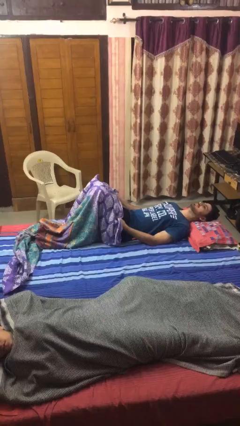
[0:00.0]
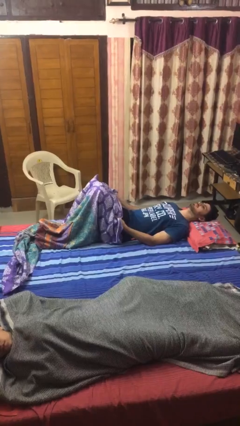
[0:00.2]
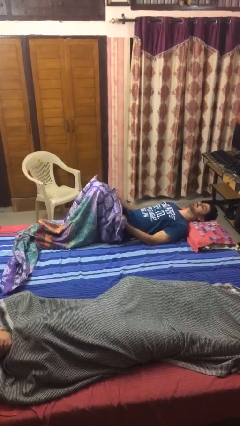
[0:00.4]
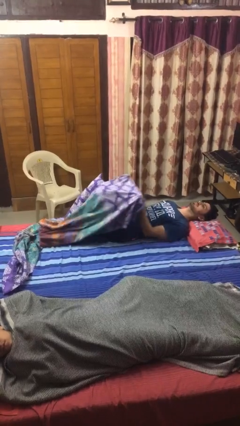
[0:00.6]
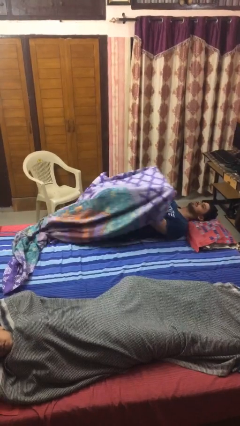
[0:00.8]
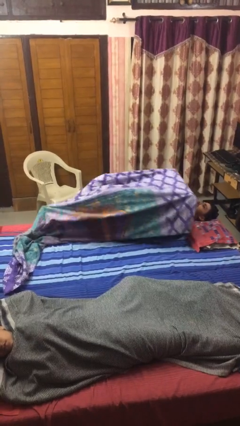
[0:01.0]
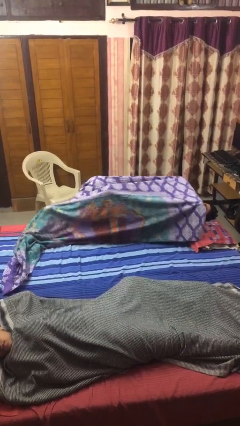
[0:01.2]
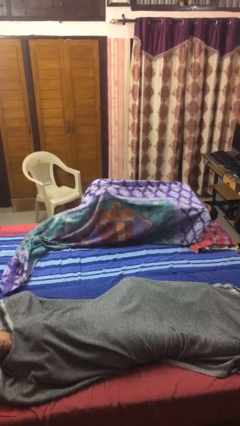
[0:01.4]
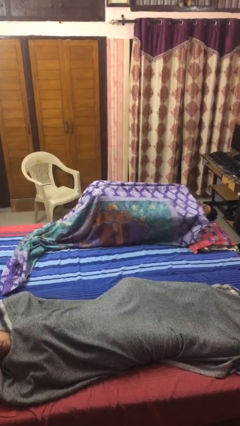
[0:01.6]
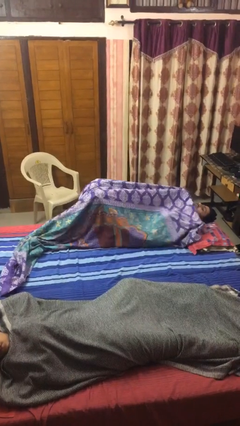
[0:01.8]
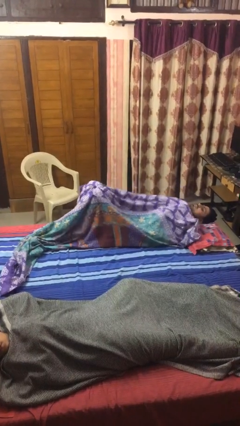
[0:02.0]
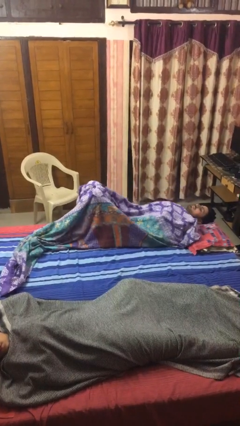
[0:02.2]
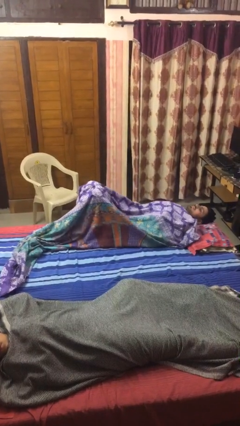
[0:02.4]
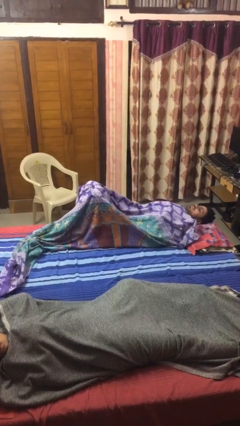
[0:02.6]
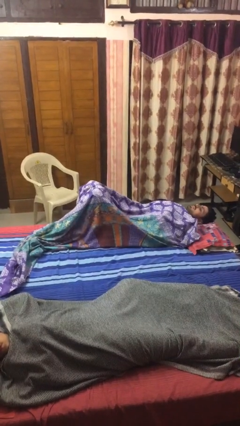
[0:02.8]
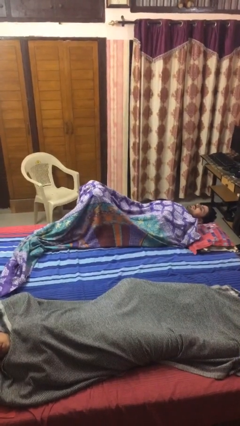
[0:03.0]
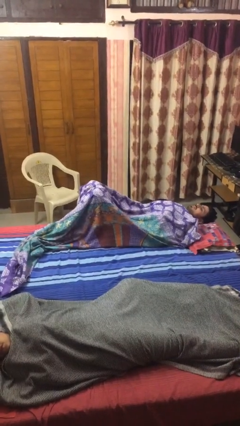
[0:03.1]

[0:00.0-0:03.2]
person covers with bedsheets

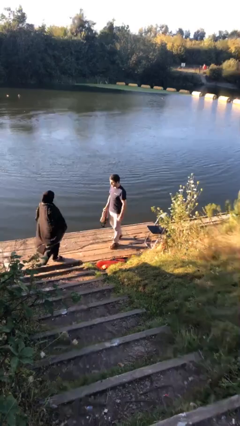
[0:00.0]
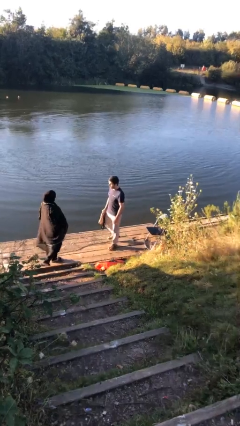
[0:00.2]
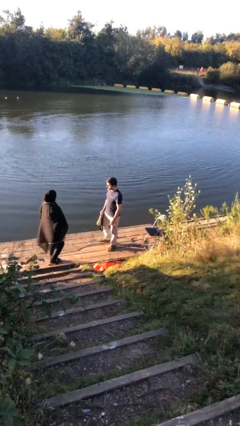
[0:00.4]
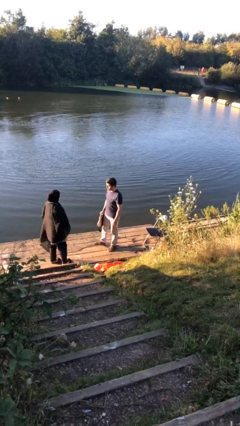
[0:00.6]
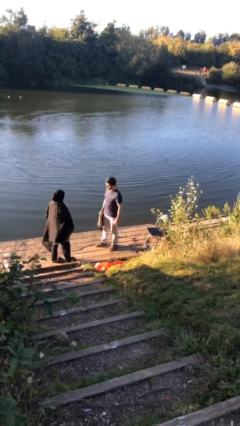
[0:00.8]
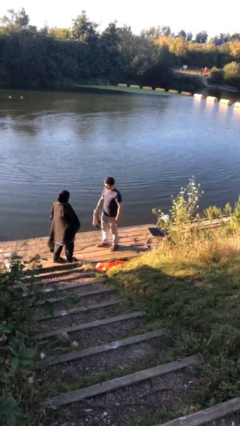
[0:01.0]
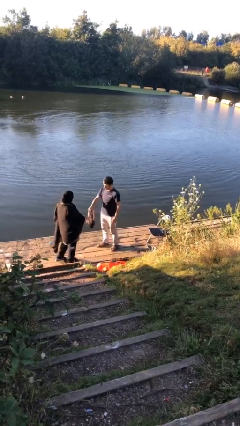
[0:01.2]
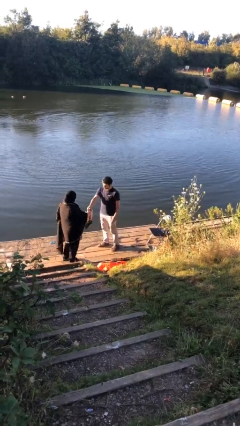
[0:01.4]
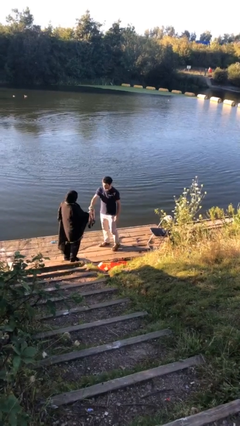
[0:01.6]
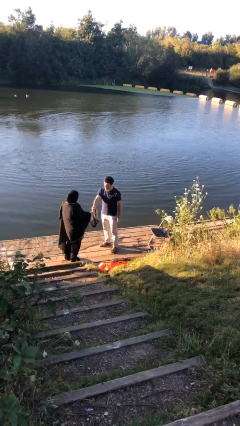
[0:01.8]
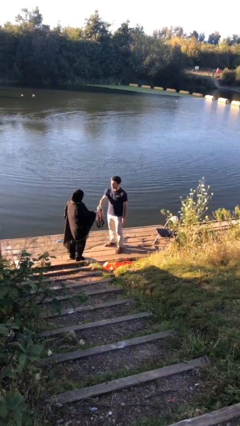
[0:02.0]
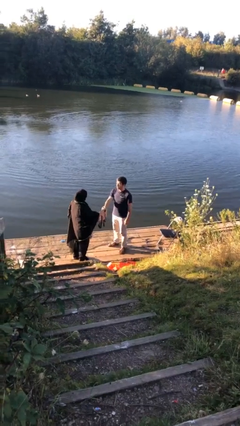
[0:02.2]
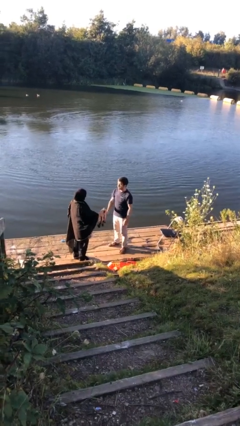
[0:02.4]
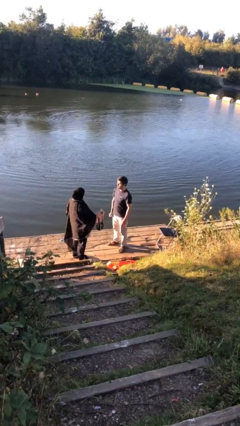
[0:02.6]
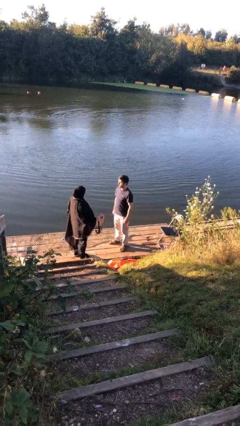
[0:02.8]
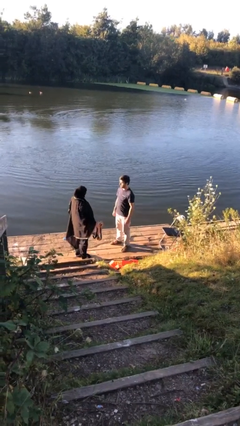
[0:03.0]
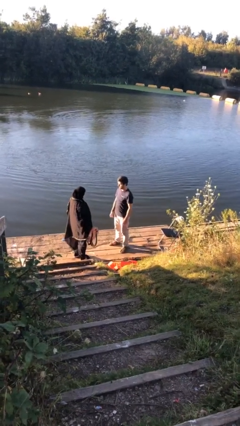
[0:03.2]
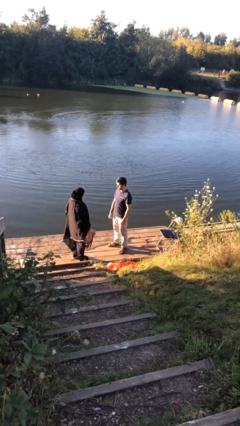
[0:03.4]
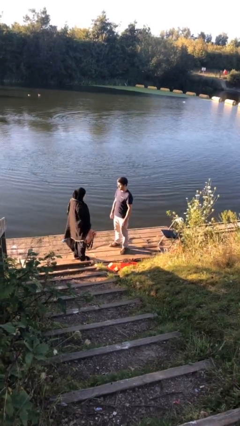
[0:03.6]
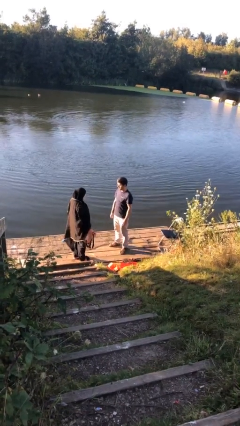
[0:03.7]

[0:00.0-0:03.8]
person transfers object to person

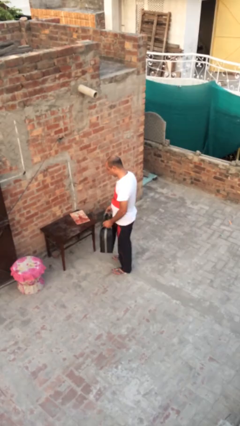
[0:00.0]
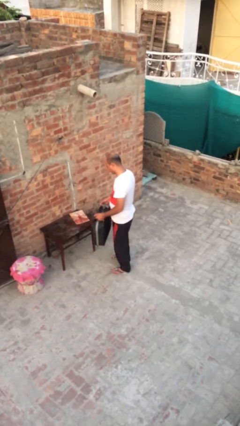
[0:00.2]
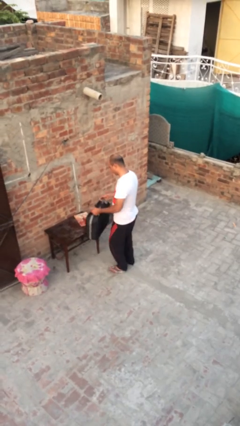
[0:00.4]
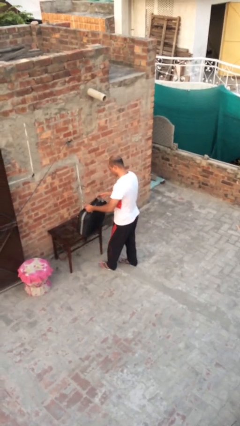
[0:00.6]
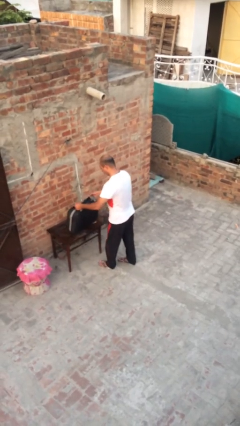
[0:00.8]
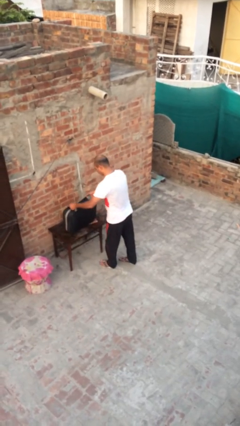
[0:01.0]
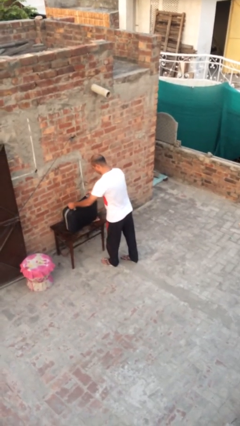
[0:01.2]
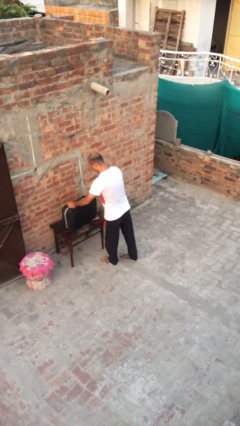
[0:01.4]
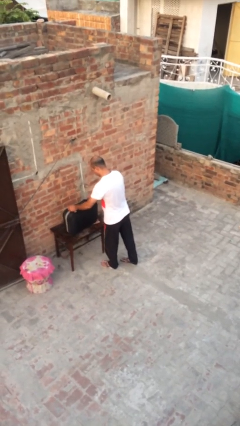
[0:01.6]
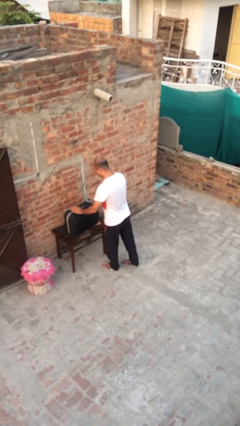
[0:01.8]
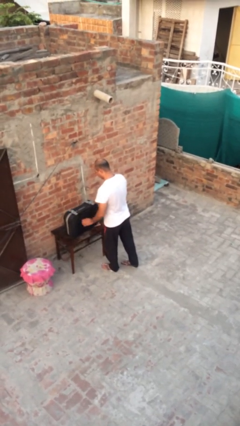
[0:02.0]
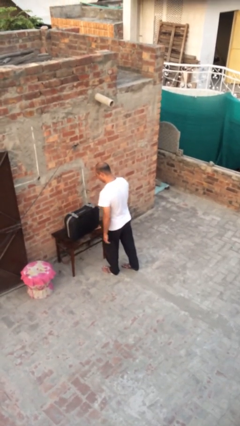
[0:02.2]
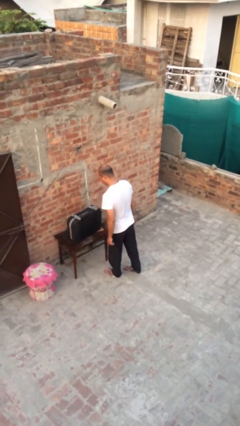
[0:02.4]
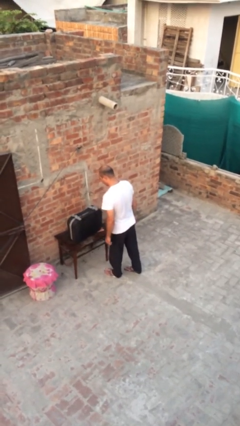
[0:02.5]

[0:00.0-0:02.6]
person puts down object on table

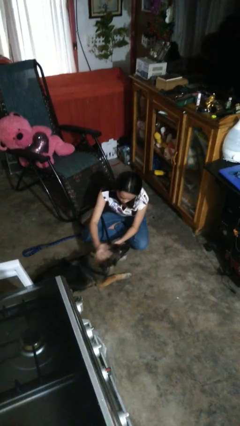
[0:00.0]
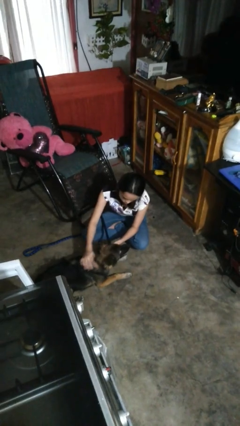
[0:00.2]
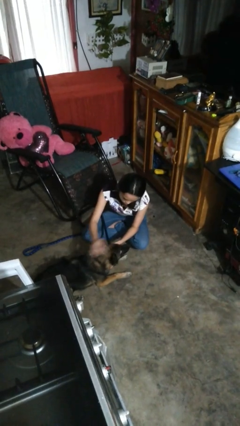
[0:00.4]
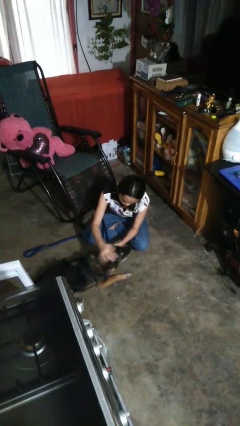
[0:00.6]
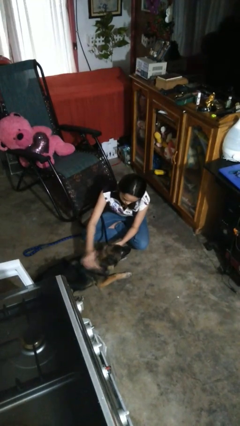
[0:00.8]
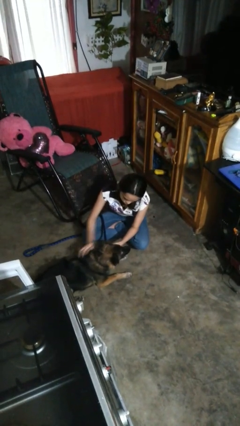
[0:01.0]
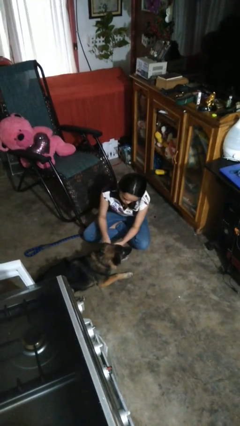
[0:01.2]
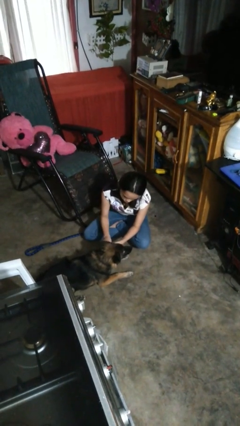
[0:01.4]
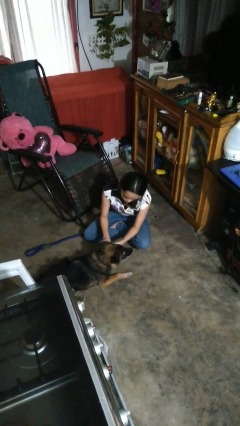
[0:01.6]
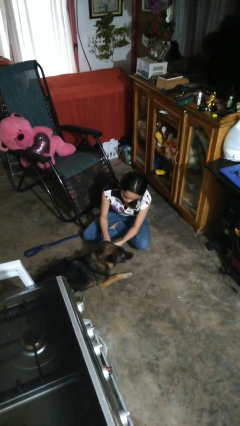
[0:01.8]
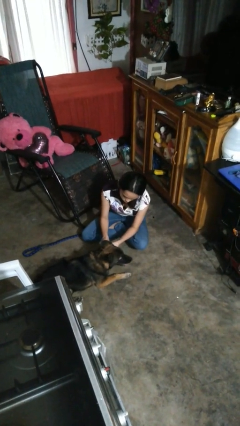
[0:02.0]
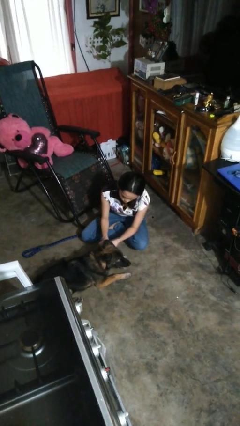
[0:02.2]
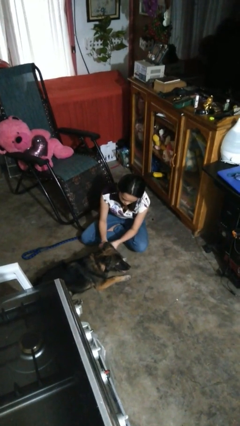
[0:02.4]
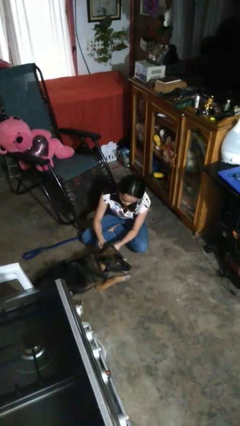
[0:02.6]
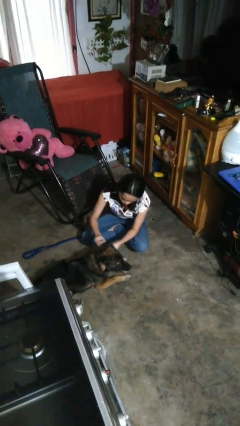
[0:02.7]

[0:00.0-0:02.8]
person unattaches leash from dog

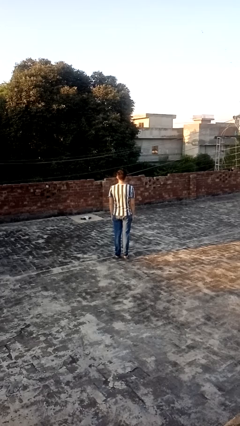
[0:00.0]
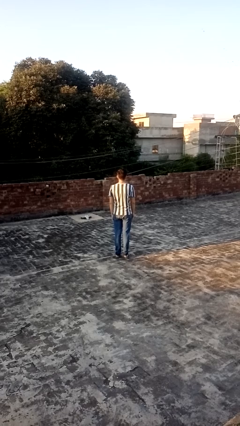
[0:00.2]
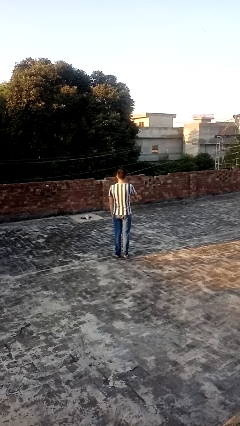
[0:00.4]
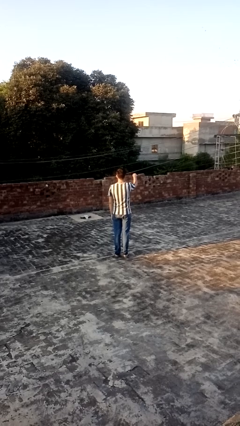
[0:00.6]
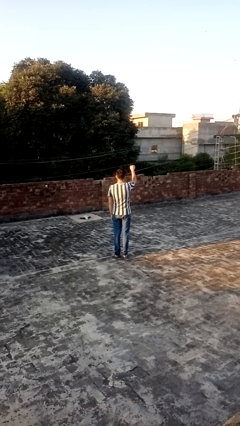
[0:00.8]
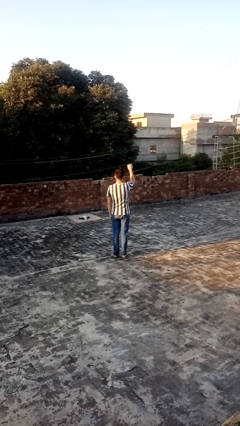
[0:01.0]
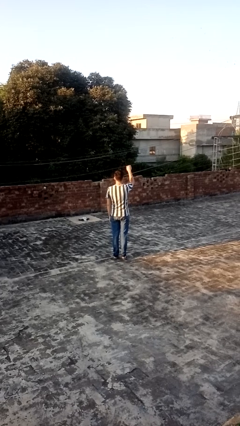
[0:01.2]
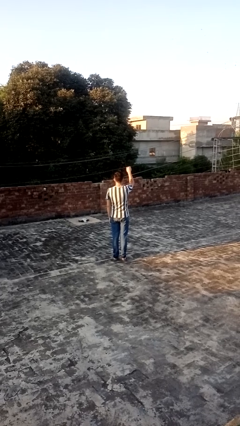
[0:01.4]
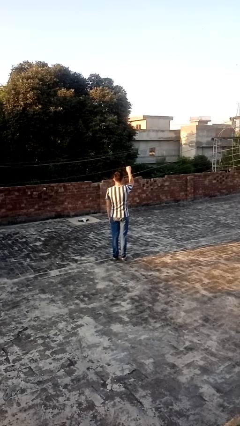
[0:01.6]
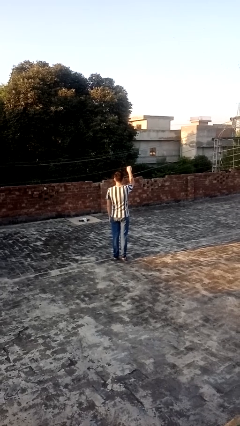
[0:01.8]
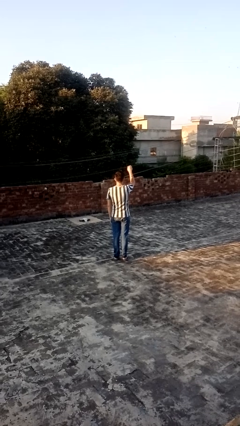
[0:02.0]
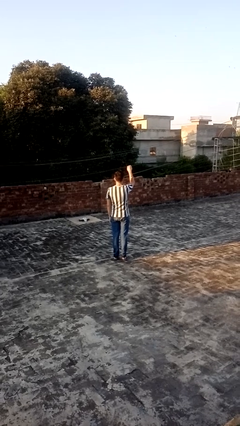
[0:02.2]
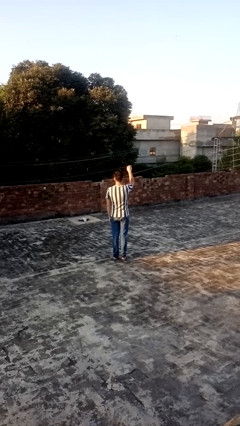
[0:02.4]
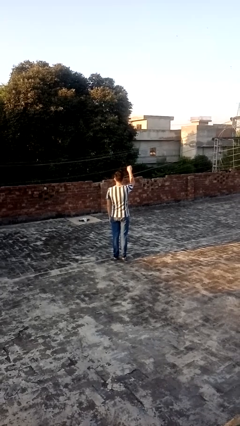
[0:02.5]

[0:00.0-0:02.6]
person gestures swipe up

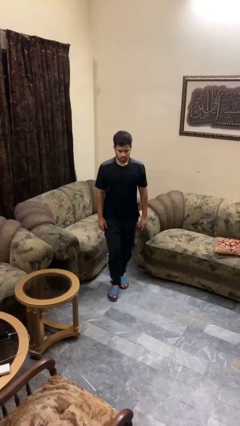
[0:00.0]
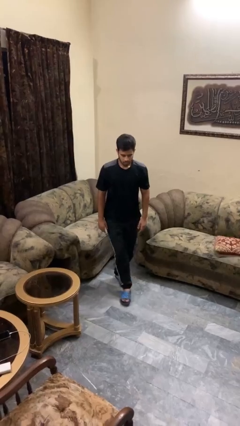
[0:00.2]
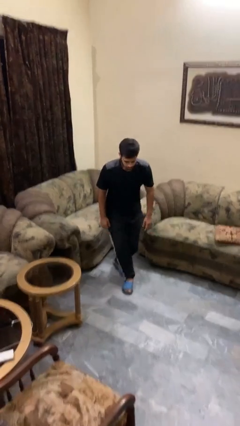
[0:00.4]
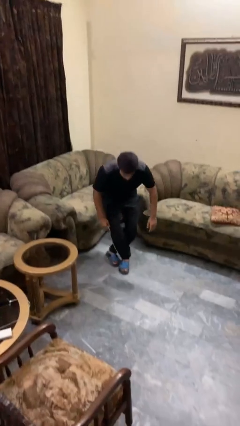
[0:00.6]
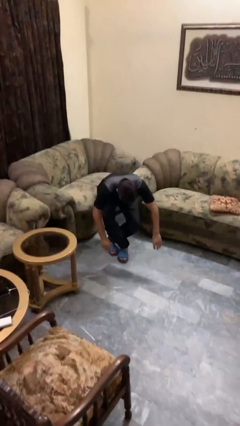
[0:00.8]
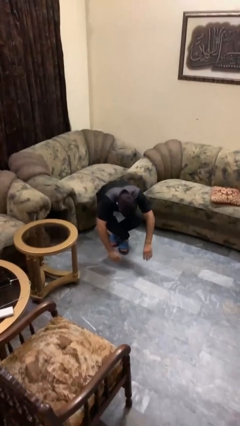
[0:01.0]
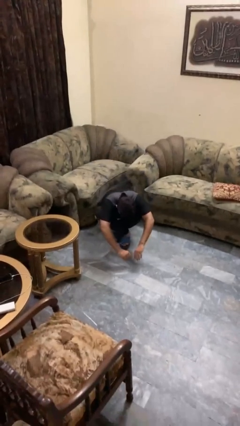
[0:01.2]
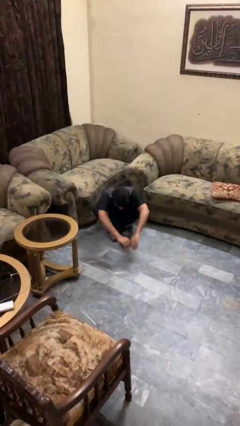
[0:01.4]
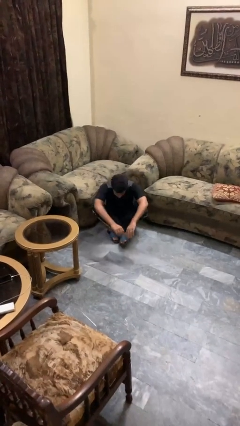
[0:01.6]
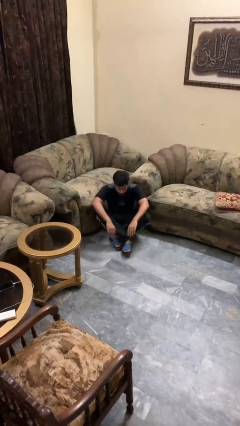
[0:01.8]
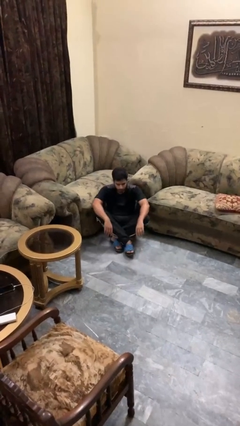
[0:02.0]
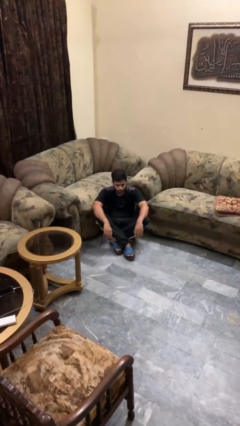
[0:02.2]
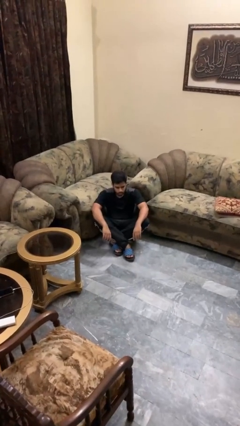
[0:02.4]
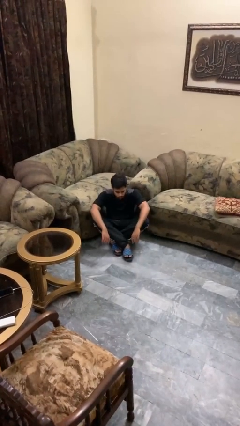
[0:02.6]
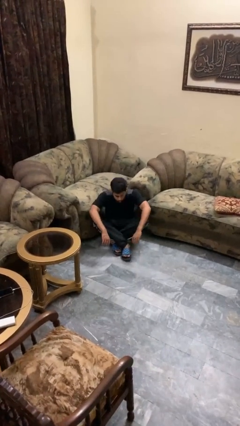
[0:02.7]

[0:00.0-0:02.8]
person sits crisscross
